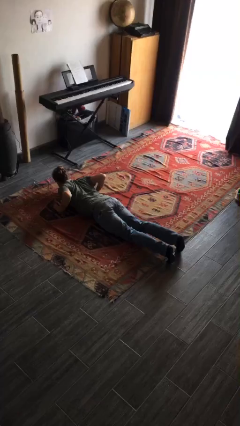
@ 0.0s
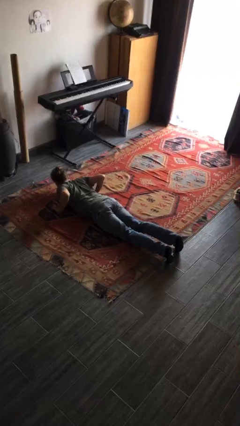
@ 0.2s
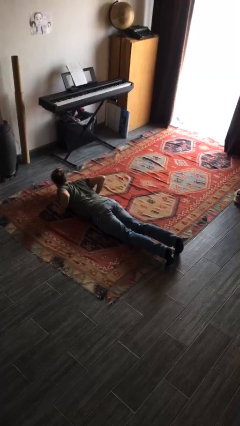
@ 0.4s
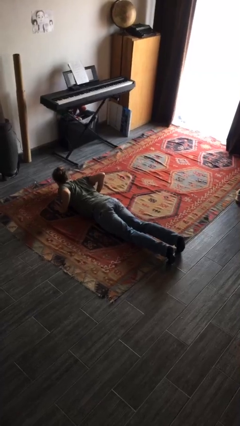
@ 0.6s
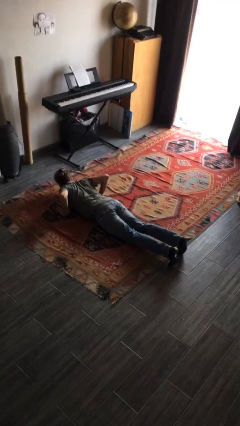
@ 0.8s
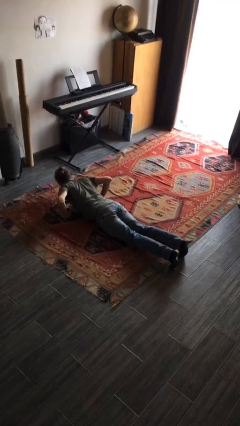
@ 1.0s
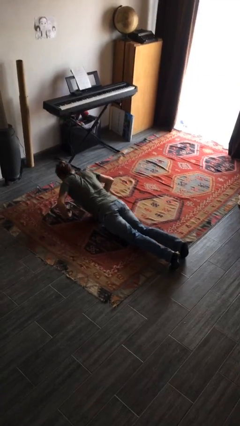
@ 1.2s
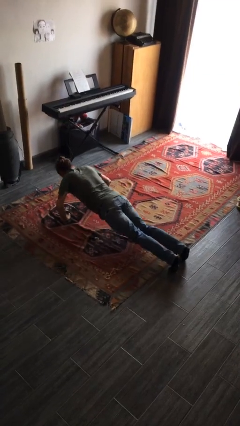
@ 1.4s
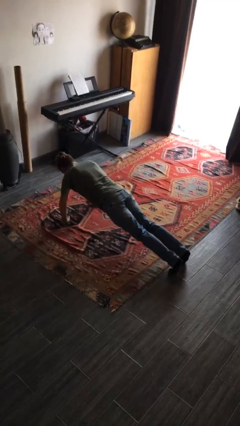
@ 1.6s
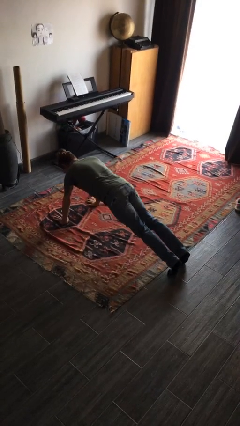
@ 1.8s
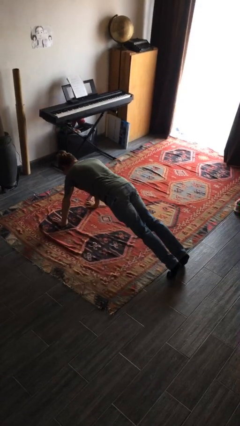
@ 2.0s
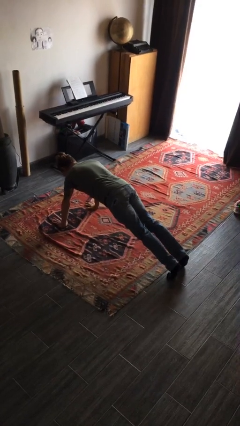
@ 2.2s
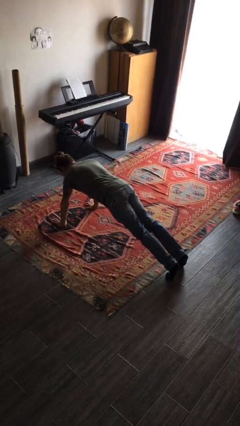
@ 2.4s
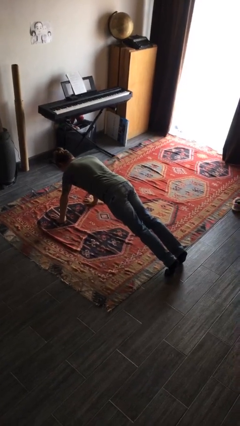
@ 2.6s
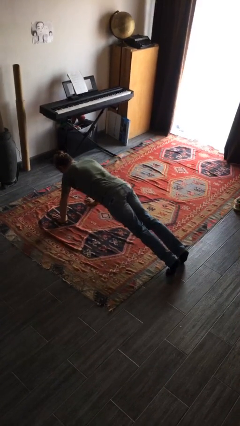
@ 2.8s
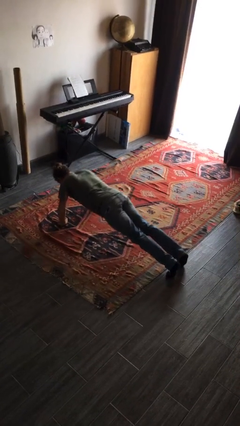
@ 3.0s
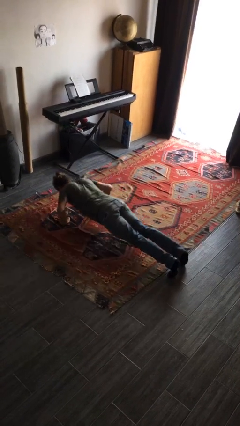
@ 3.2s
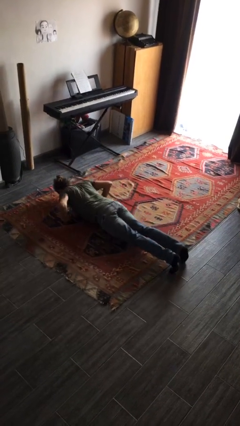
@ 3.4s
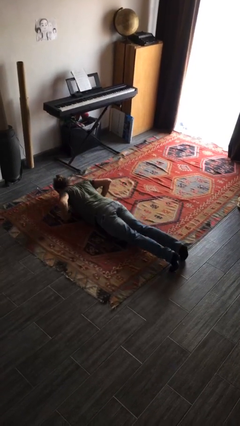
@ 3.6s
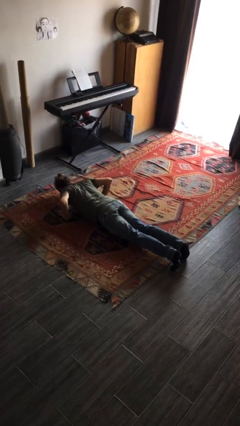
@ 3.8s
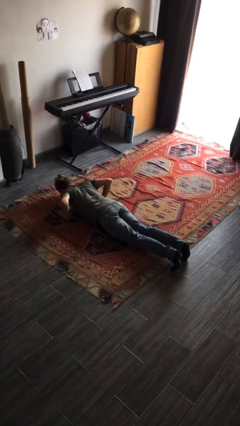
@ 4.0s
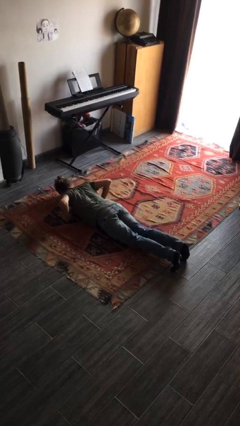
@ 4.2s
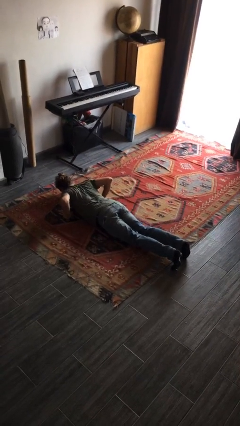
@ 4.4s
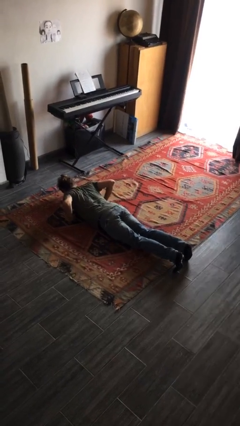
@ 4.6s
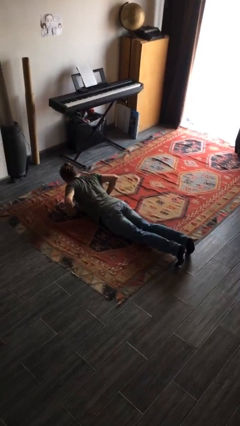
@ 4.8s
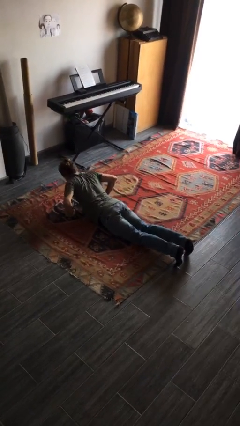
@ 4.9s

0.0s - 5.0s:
person exercises with pushup

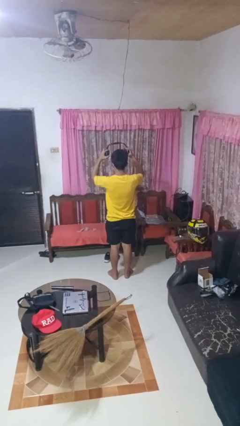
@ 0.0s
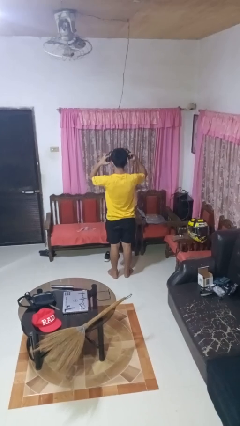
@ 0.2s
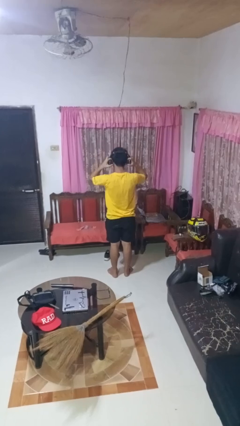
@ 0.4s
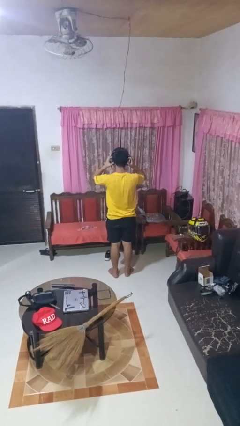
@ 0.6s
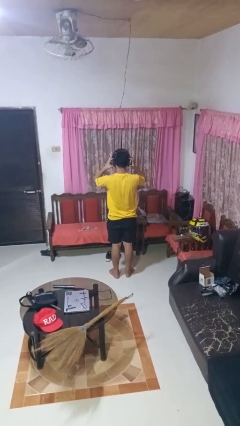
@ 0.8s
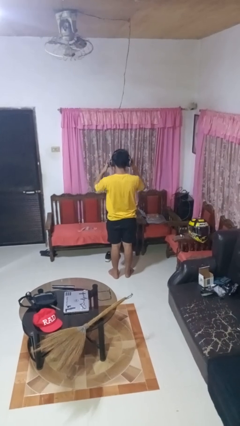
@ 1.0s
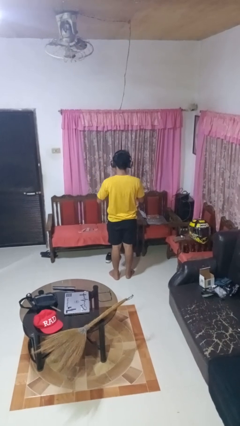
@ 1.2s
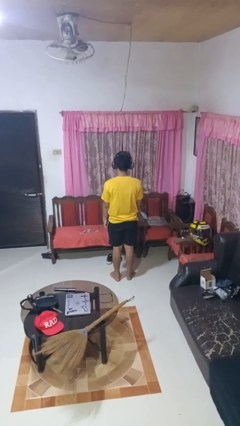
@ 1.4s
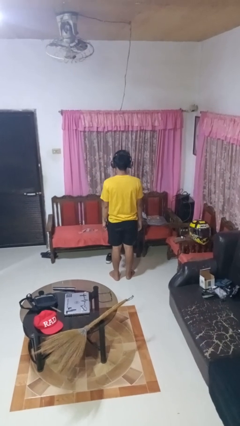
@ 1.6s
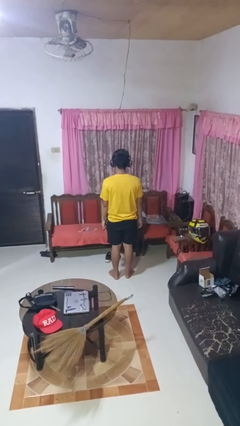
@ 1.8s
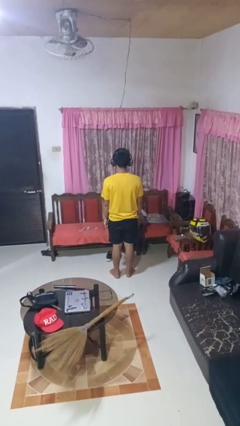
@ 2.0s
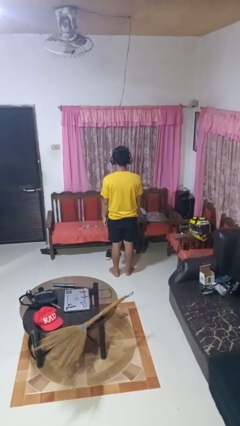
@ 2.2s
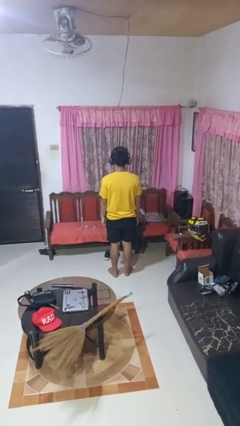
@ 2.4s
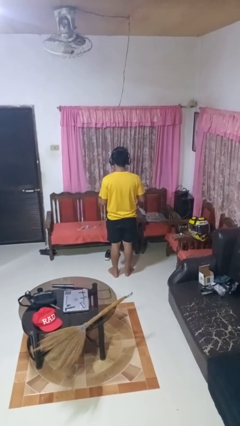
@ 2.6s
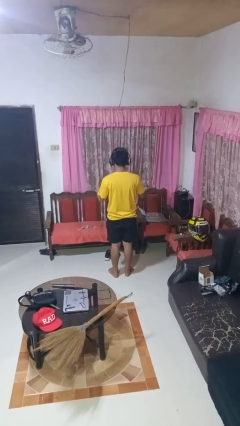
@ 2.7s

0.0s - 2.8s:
person puts on headphones

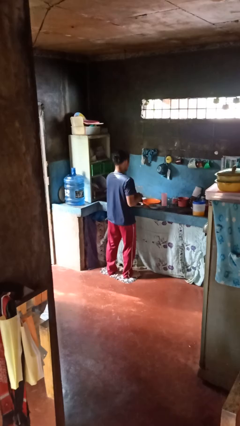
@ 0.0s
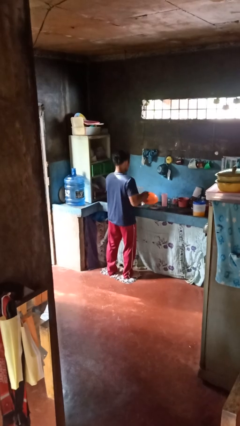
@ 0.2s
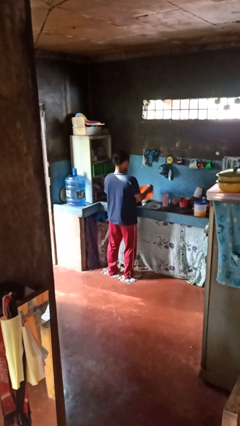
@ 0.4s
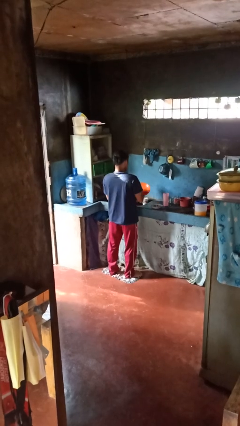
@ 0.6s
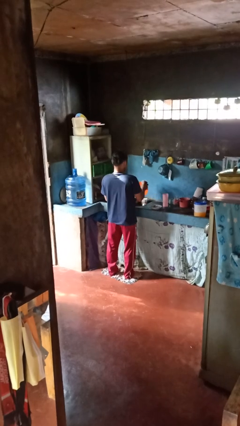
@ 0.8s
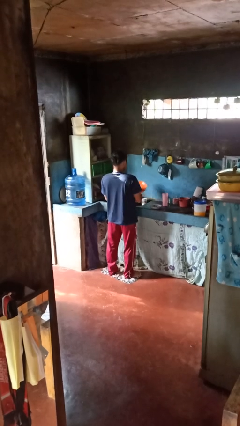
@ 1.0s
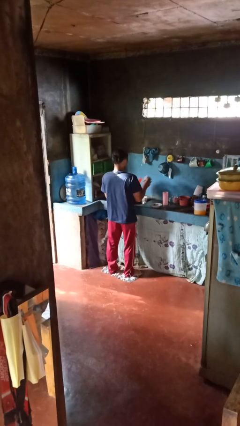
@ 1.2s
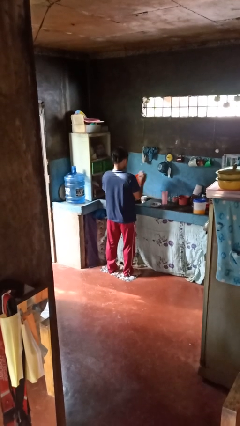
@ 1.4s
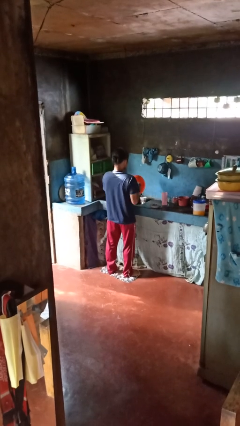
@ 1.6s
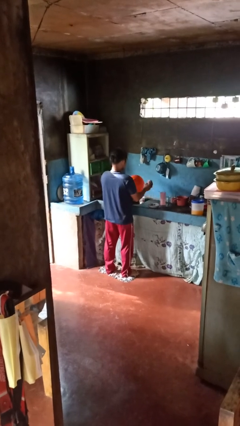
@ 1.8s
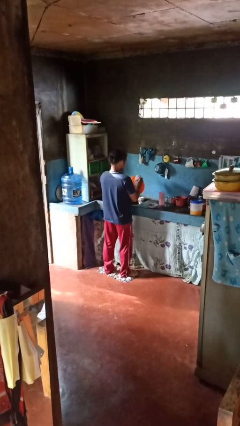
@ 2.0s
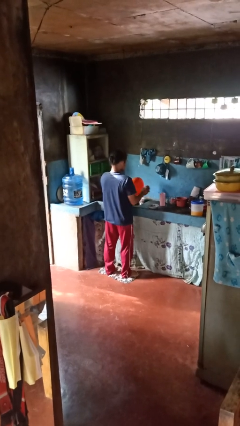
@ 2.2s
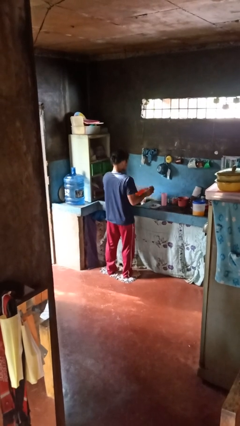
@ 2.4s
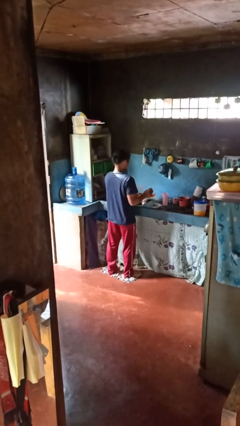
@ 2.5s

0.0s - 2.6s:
person dries dish

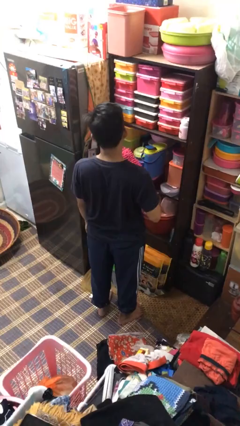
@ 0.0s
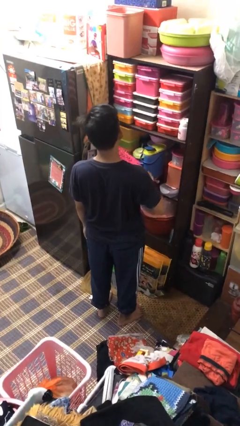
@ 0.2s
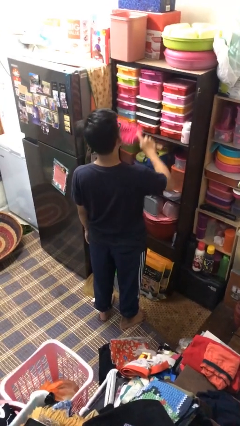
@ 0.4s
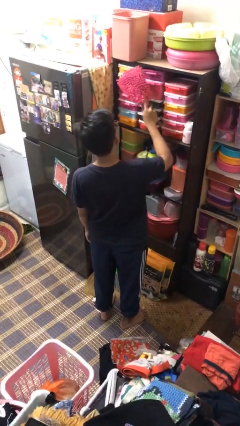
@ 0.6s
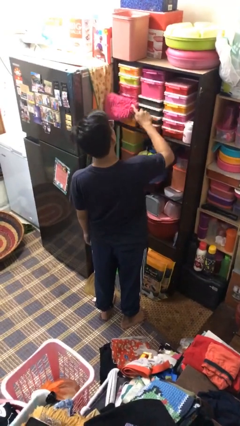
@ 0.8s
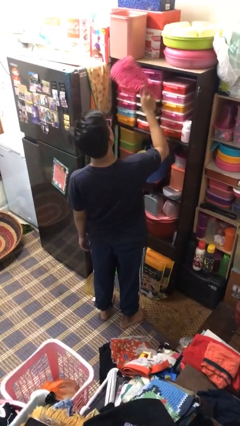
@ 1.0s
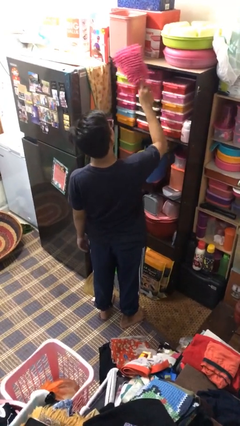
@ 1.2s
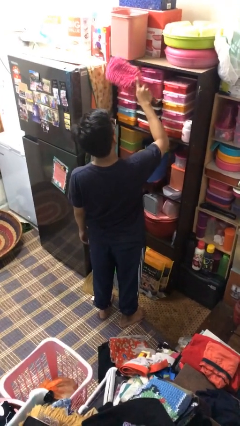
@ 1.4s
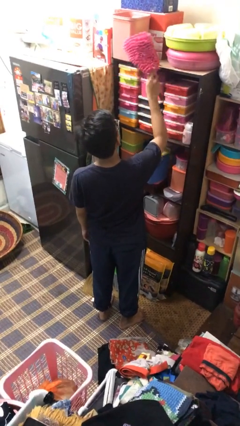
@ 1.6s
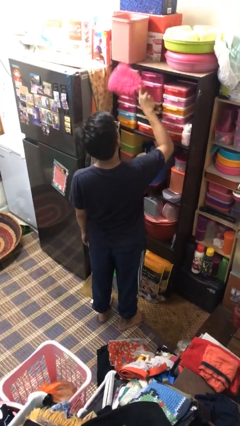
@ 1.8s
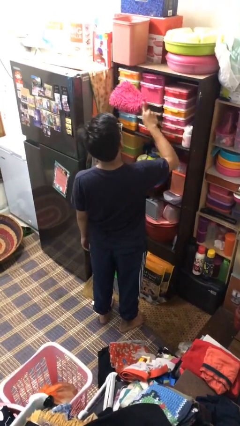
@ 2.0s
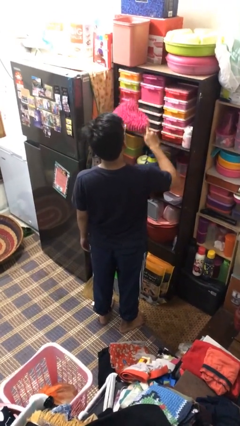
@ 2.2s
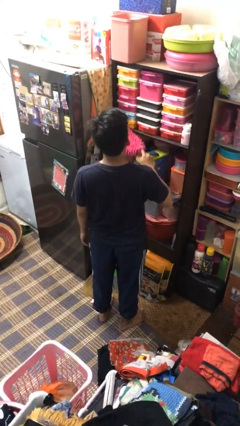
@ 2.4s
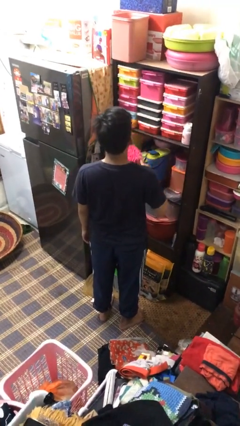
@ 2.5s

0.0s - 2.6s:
person dusts furniture

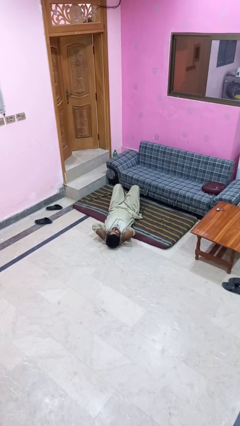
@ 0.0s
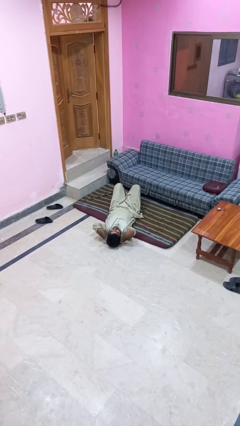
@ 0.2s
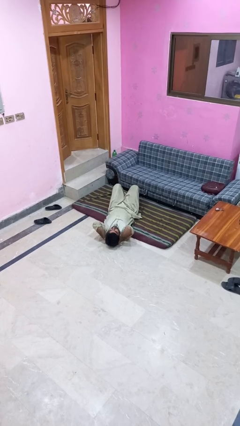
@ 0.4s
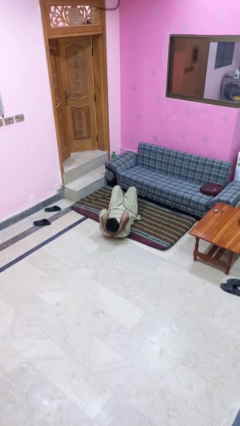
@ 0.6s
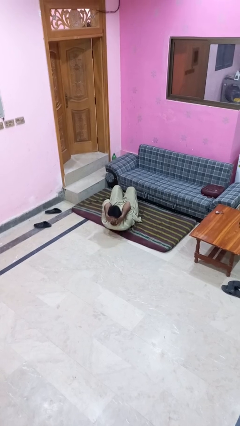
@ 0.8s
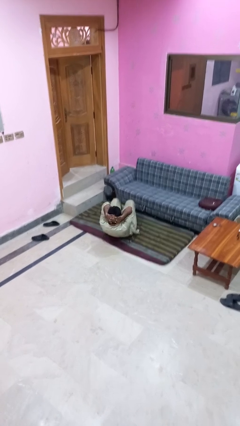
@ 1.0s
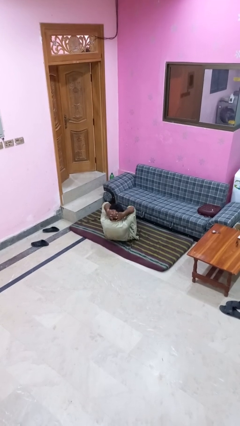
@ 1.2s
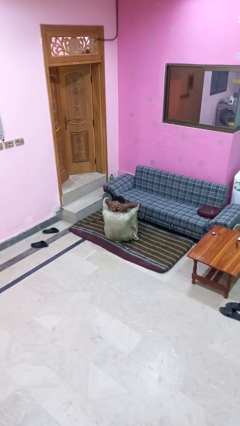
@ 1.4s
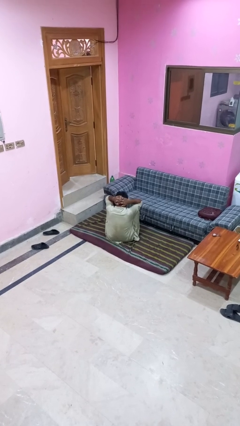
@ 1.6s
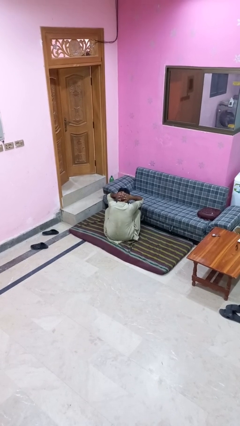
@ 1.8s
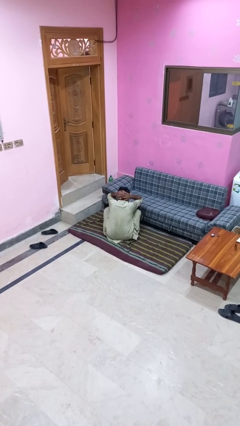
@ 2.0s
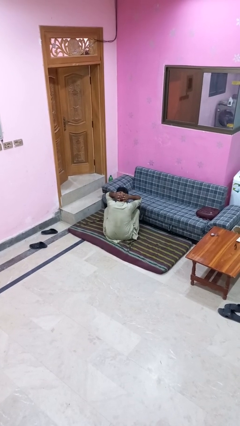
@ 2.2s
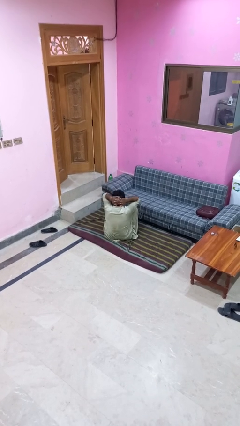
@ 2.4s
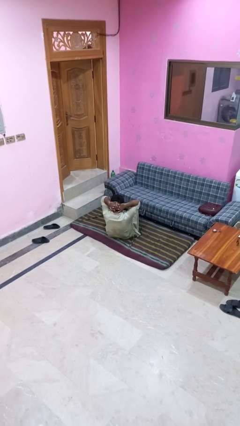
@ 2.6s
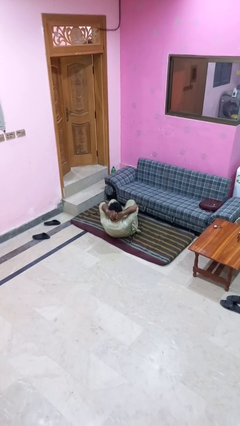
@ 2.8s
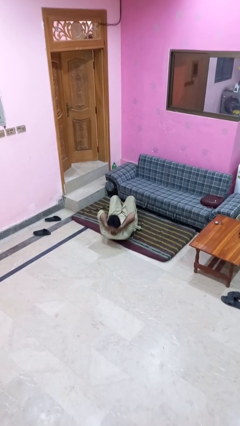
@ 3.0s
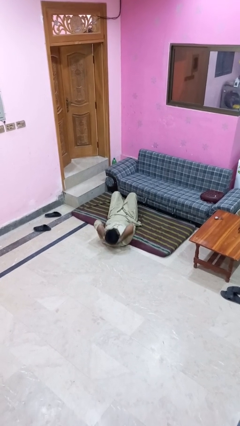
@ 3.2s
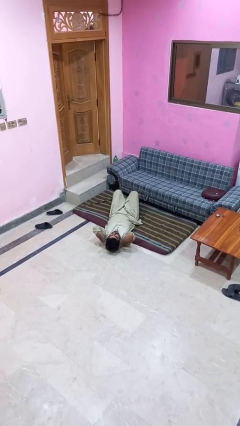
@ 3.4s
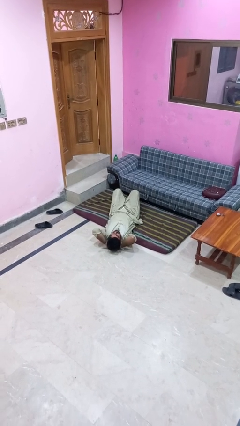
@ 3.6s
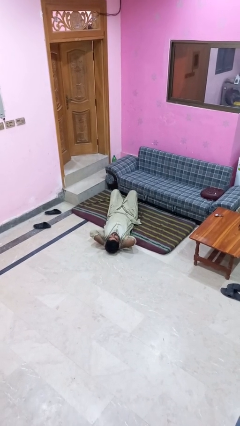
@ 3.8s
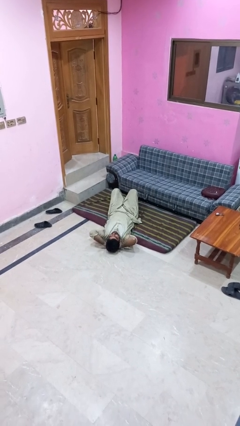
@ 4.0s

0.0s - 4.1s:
person exercises with situp
